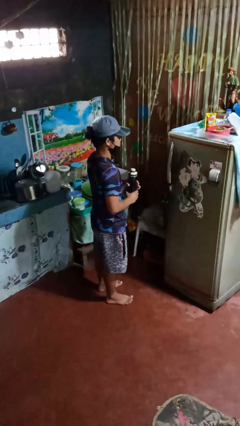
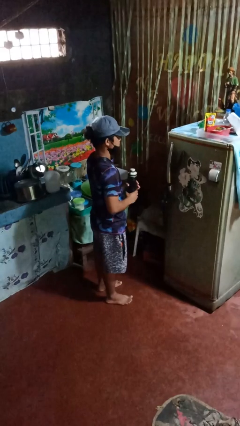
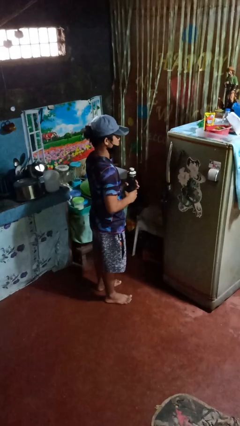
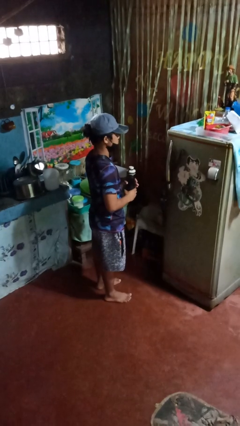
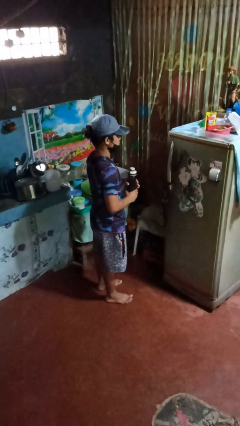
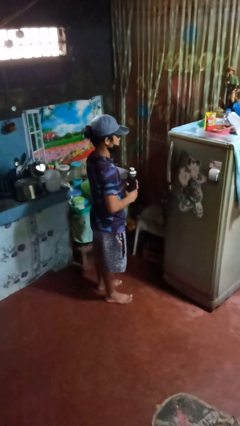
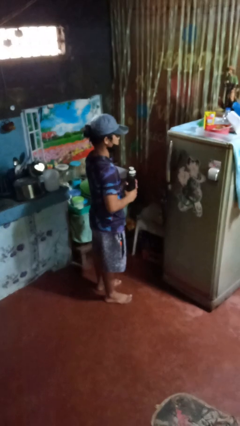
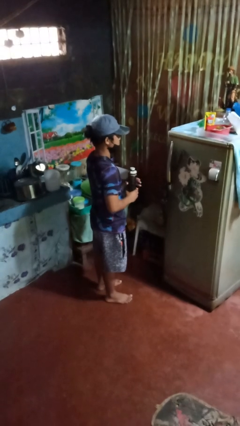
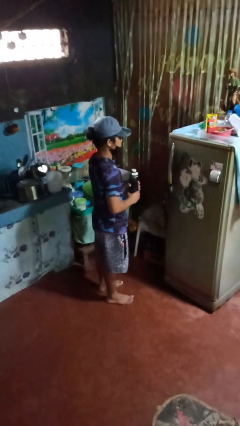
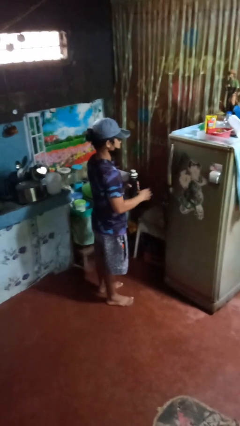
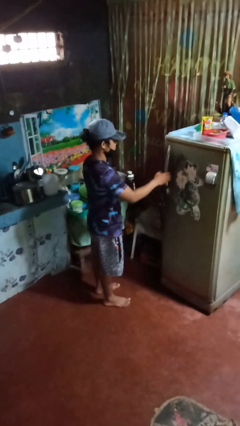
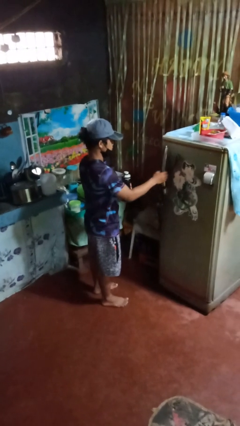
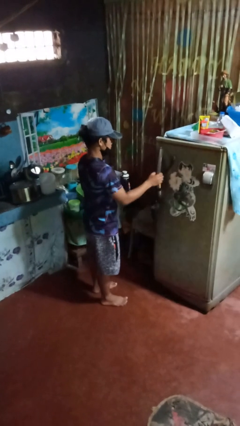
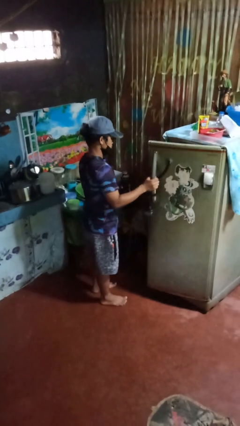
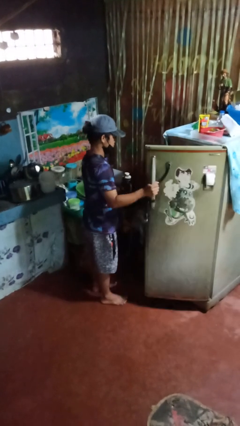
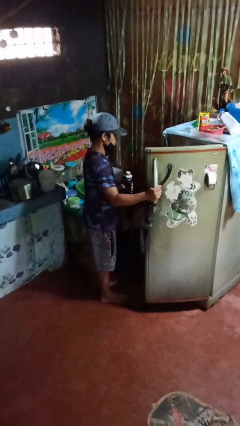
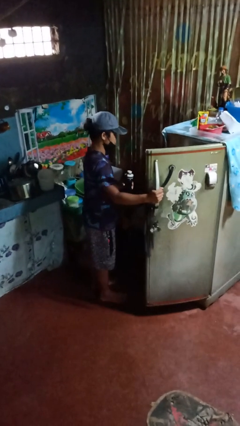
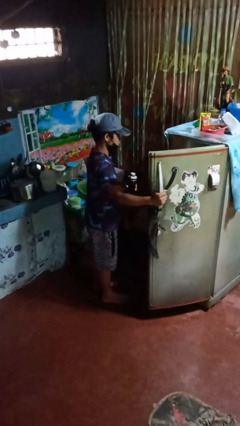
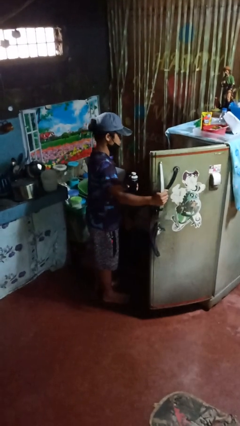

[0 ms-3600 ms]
person opens refrigerator

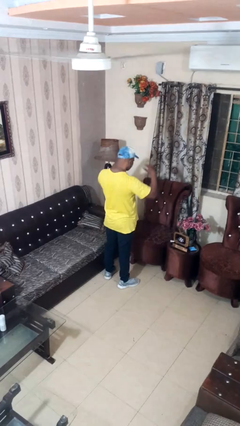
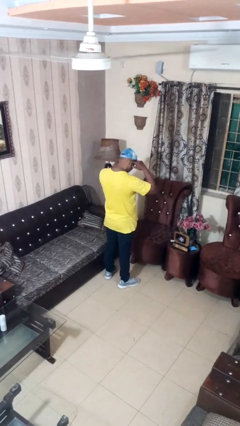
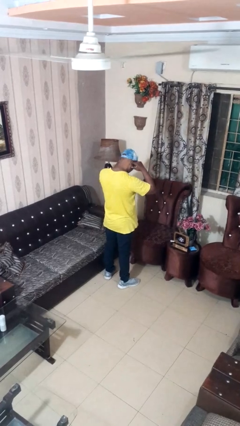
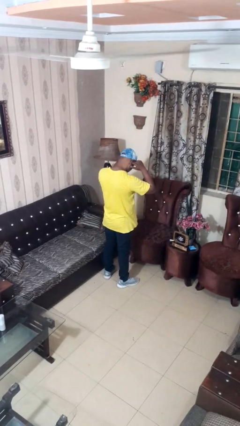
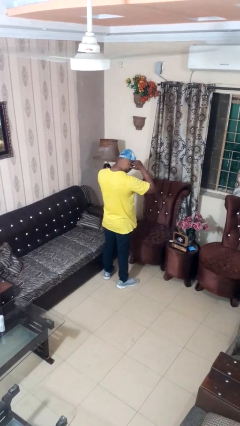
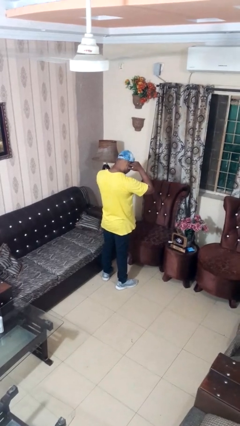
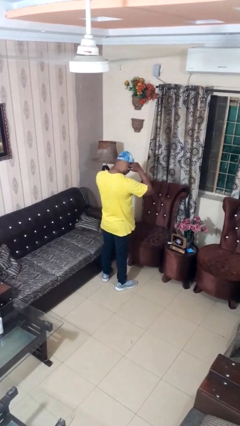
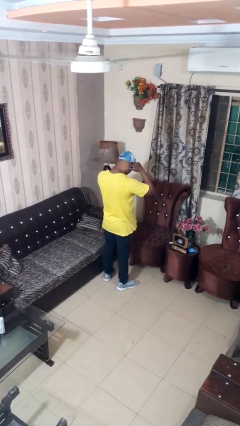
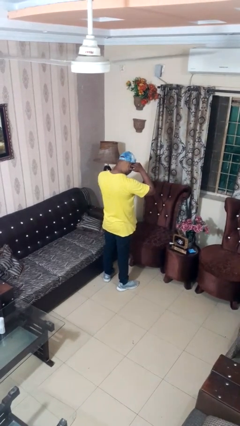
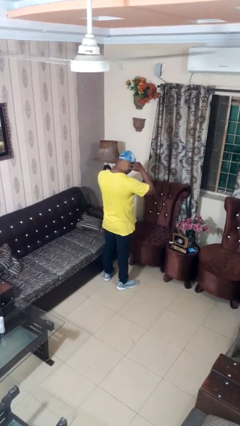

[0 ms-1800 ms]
person puts fingers in ear

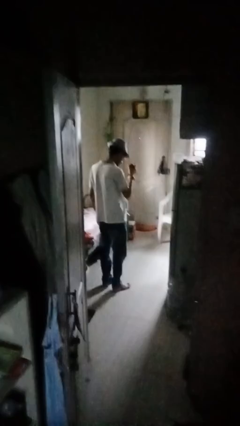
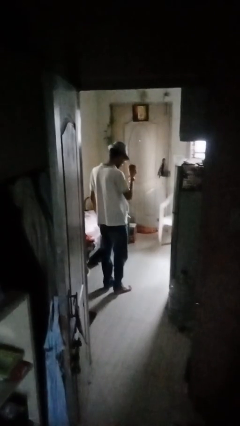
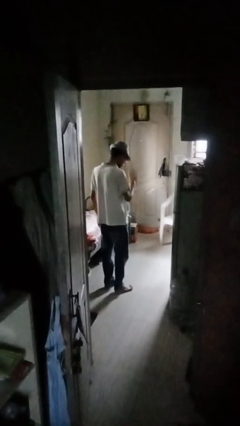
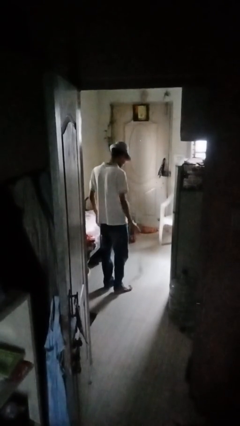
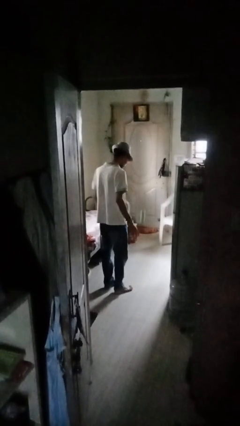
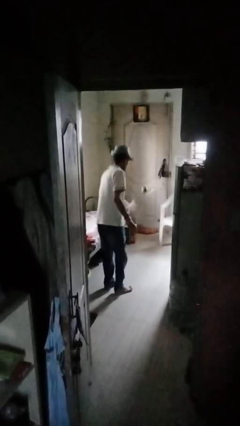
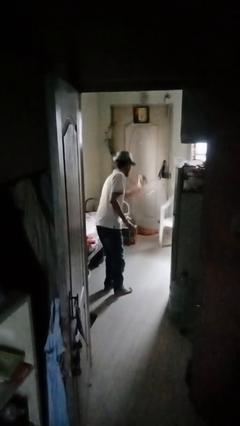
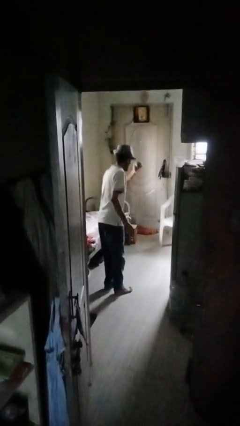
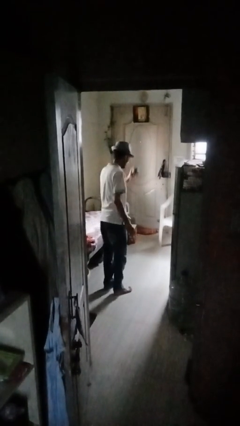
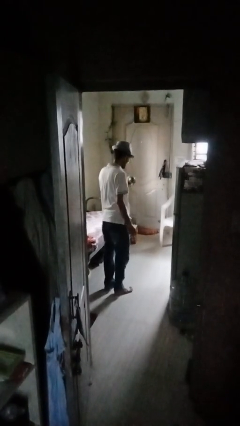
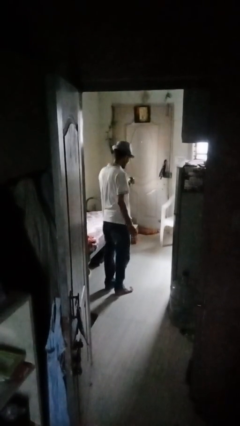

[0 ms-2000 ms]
person bounces ball on floor

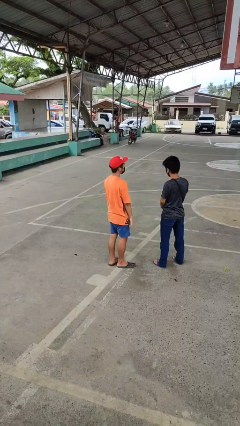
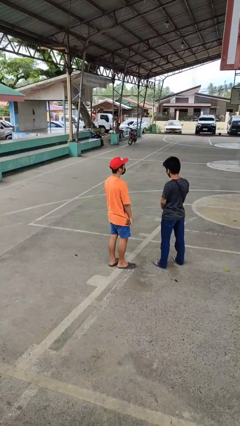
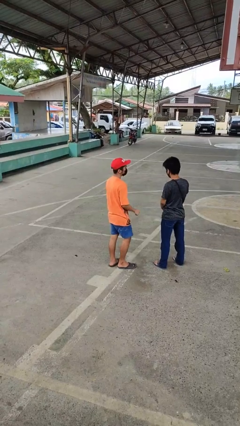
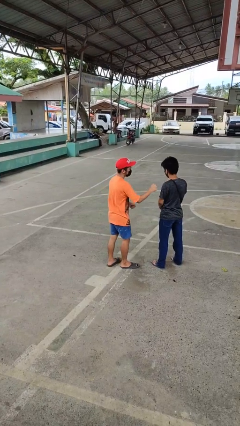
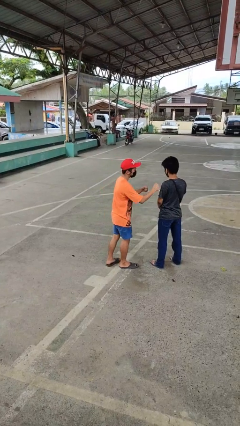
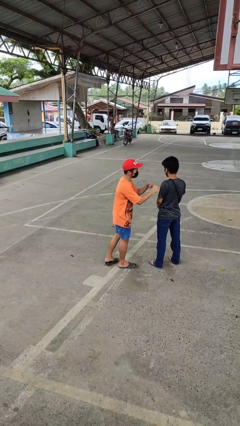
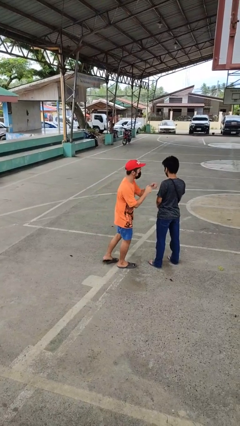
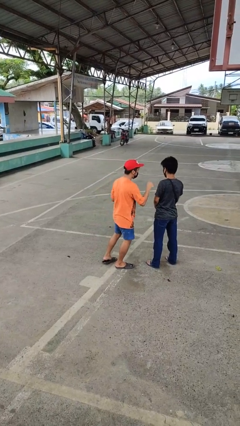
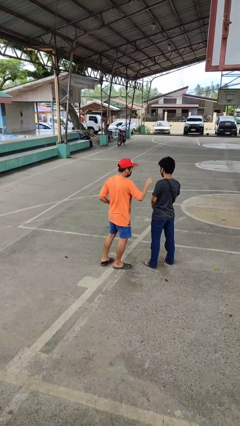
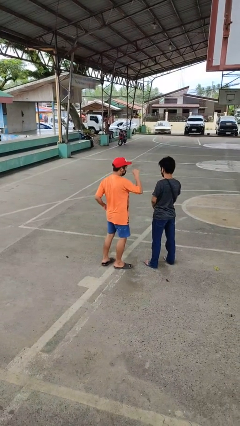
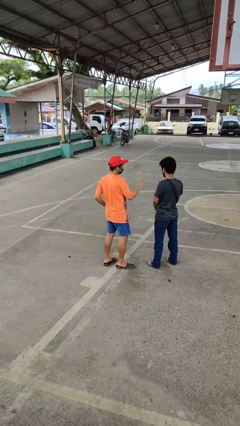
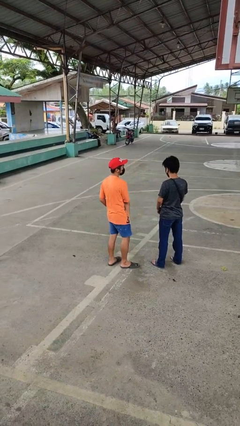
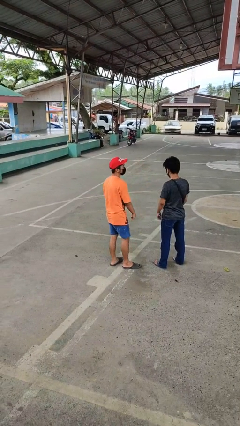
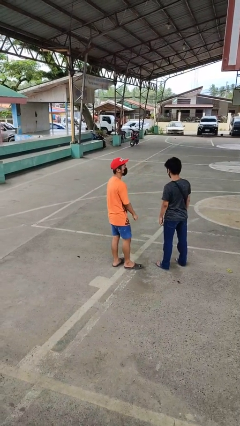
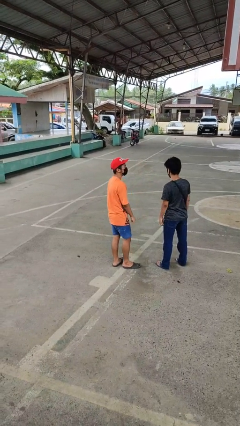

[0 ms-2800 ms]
person pounds shoulders of person

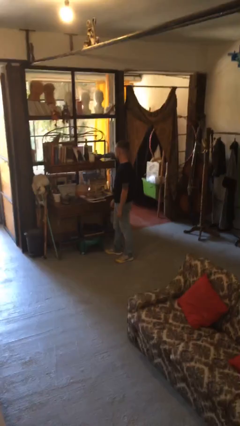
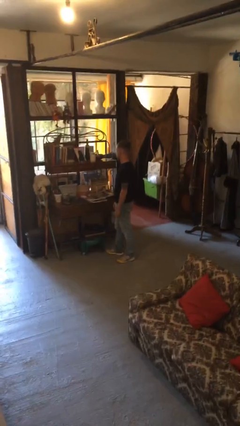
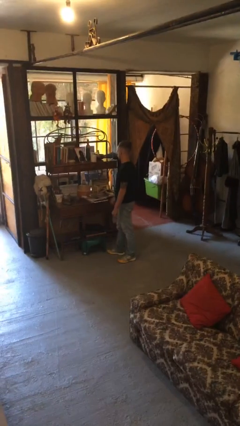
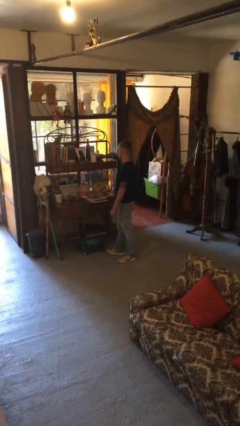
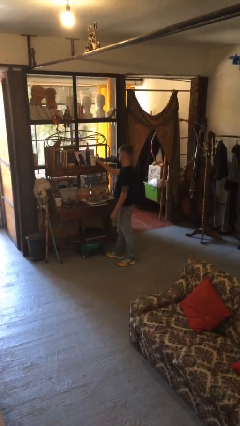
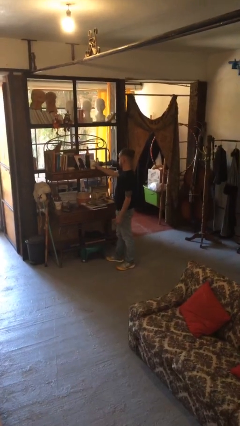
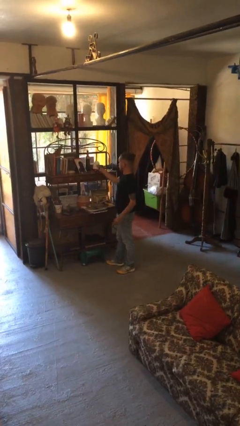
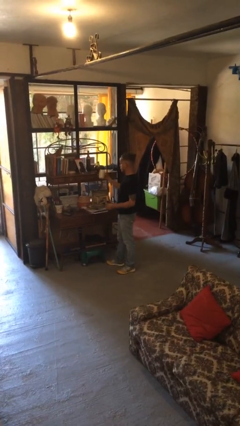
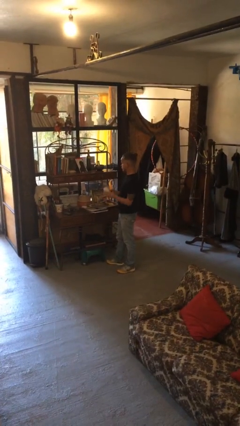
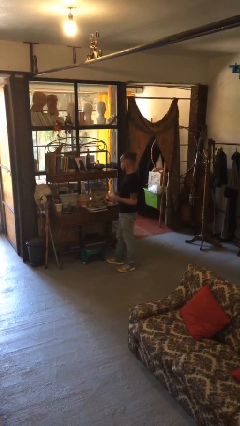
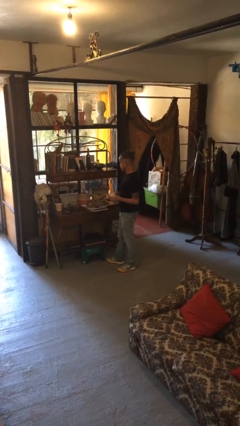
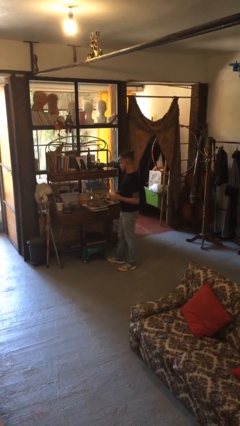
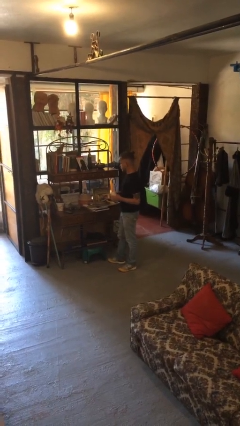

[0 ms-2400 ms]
person picks up object from countertop

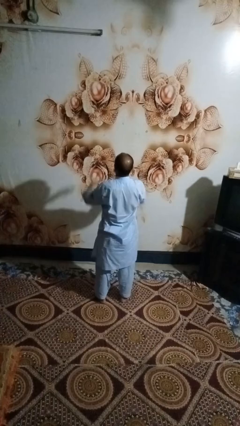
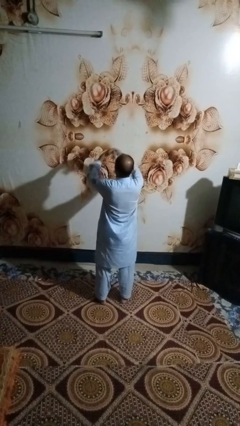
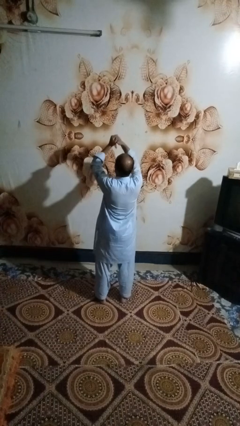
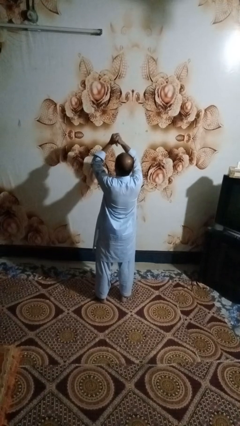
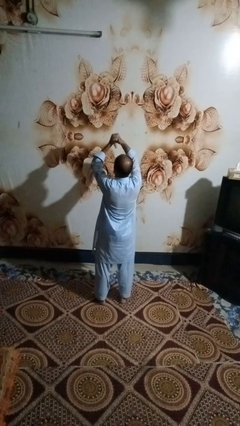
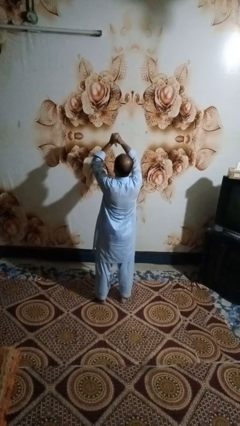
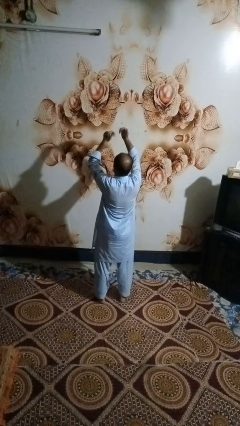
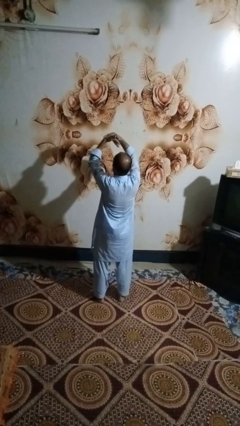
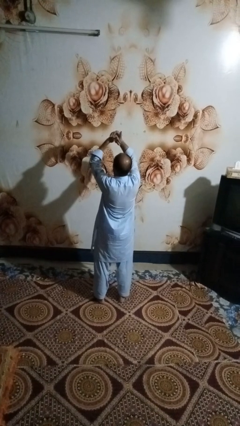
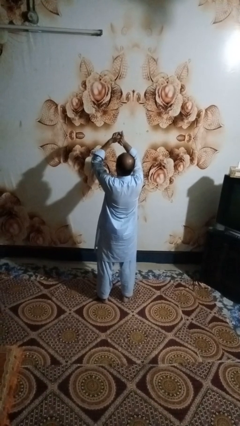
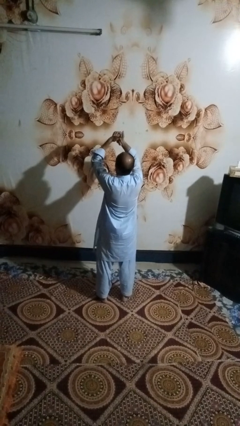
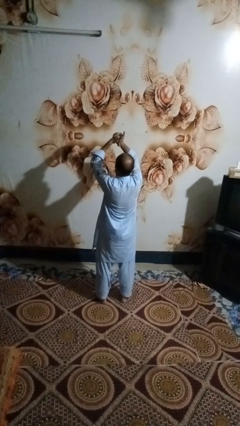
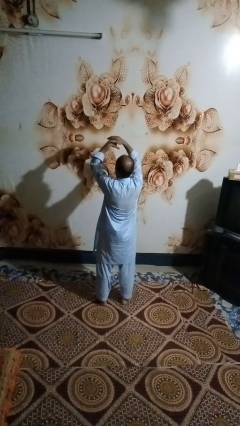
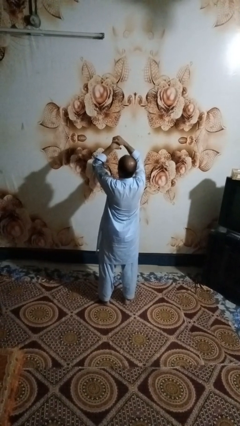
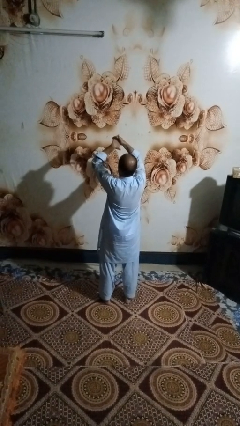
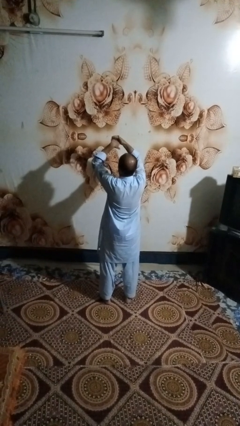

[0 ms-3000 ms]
person cracks knuckles

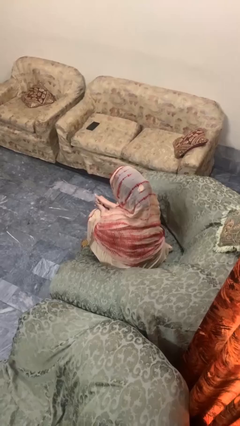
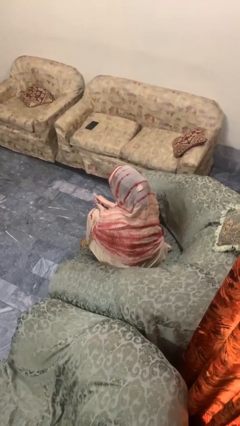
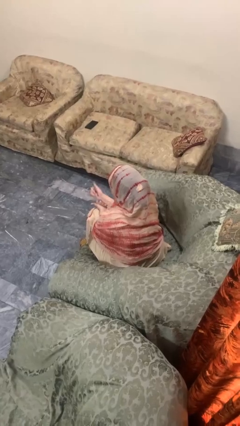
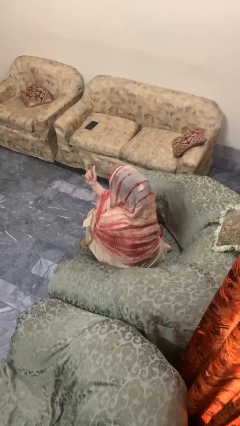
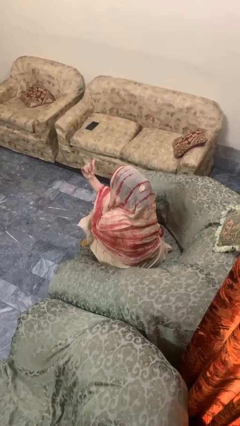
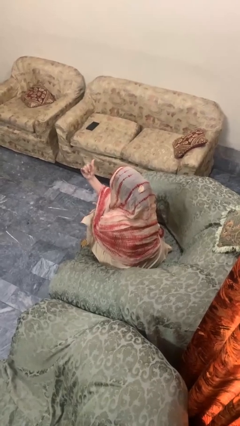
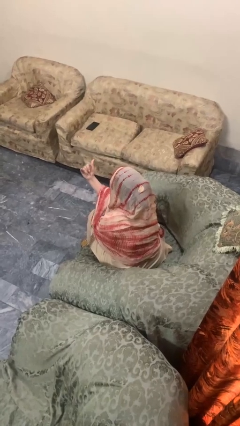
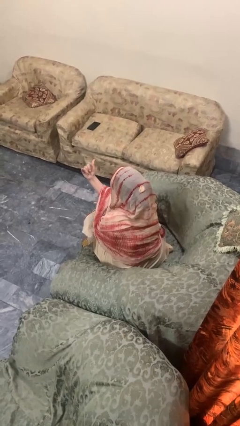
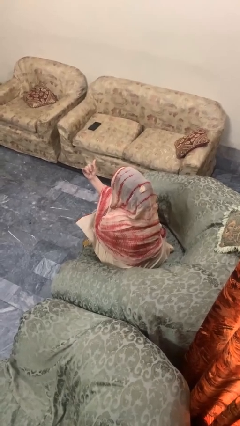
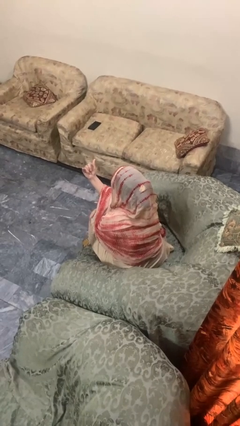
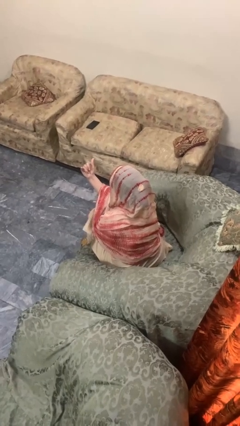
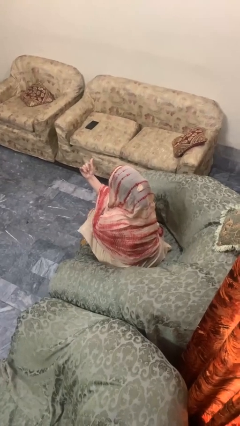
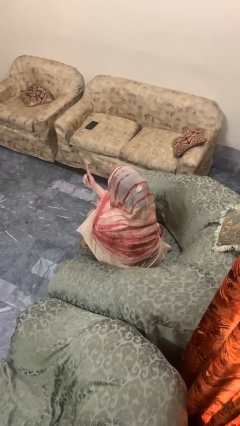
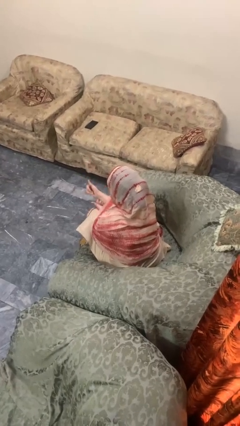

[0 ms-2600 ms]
person gestures hang loose
